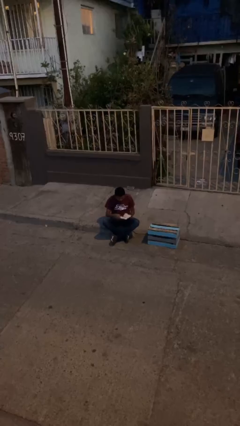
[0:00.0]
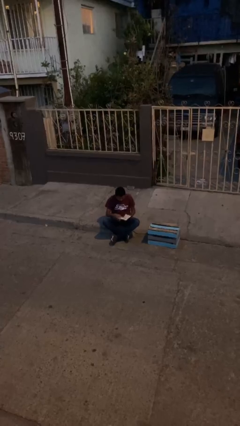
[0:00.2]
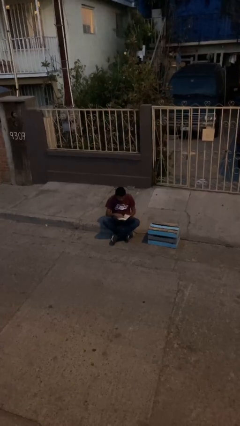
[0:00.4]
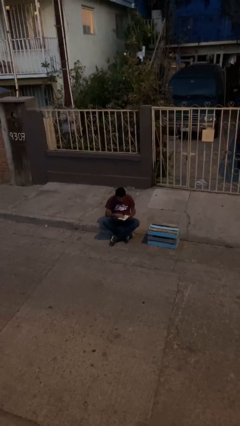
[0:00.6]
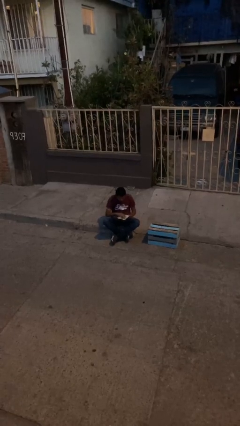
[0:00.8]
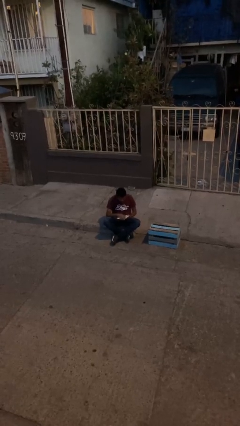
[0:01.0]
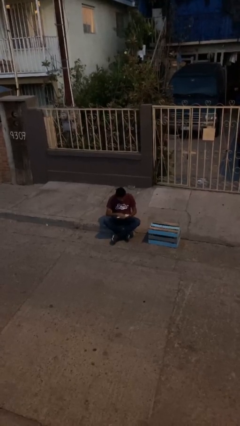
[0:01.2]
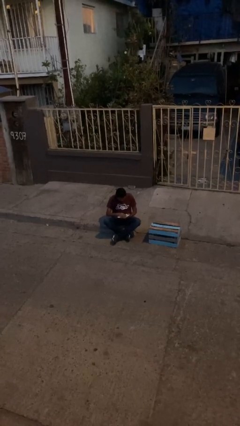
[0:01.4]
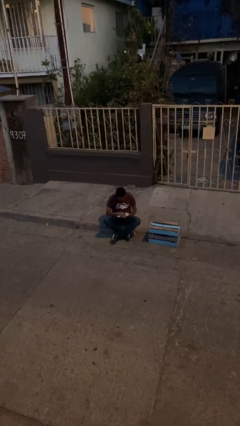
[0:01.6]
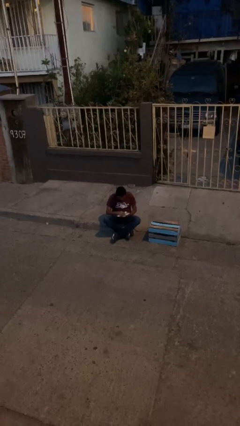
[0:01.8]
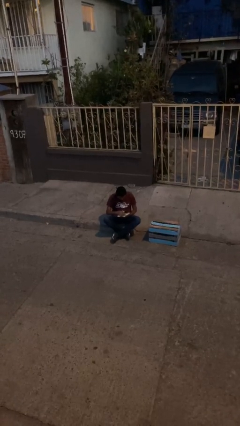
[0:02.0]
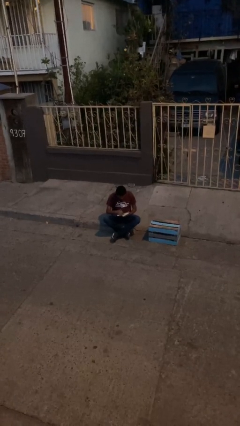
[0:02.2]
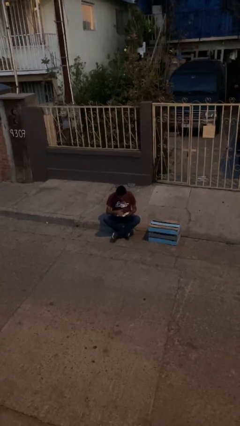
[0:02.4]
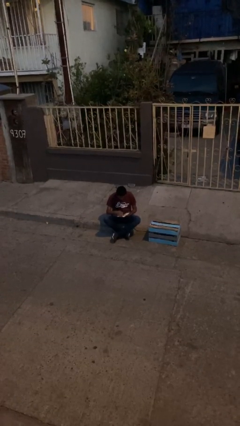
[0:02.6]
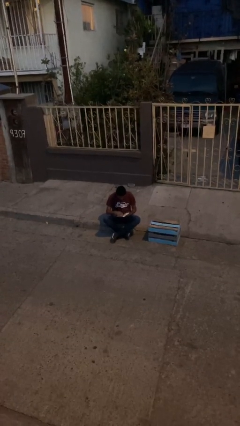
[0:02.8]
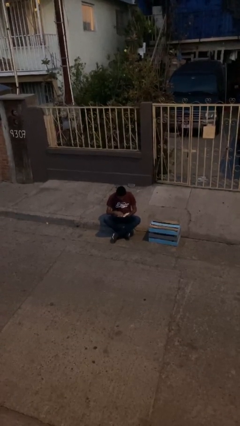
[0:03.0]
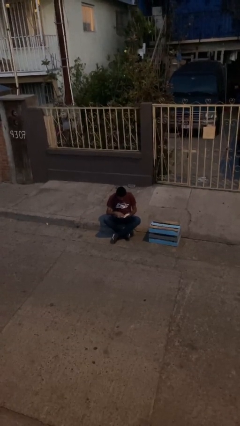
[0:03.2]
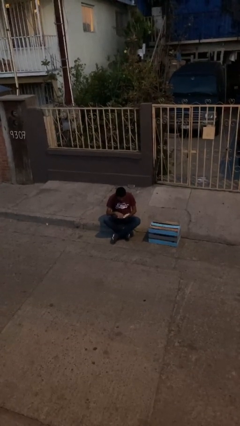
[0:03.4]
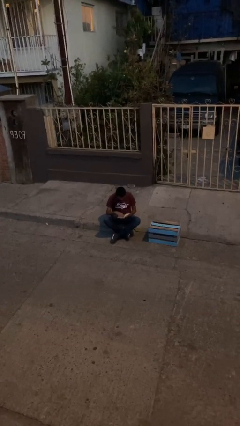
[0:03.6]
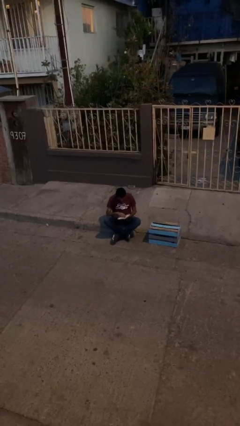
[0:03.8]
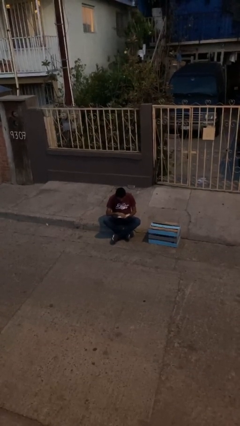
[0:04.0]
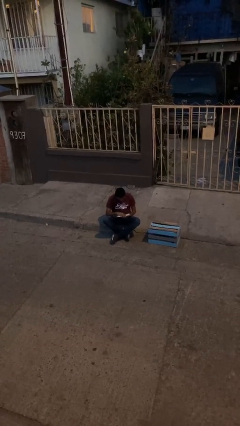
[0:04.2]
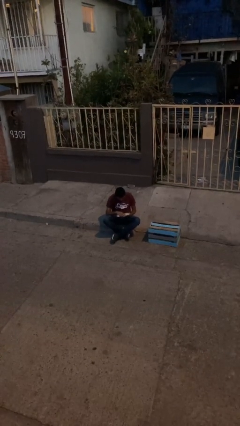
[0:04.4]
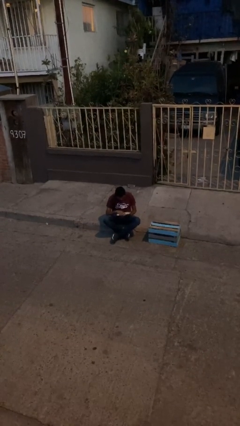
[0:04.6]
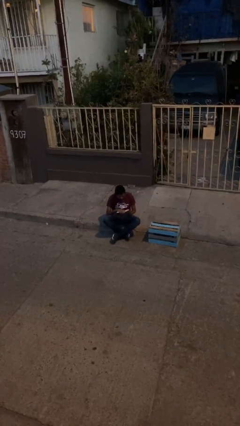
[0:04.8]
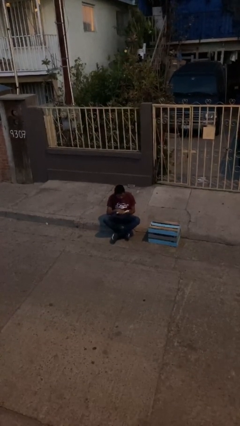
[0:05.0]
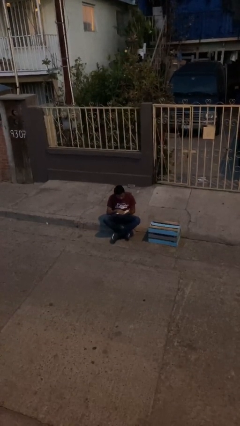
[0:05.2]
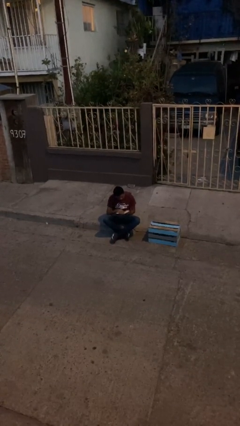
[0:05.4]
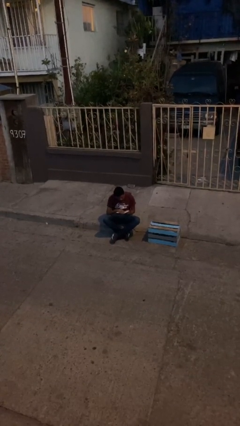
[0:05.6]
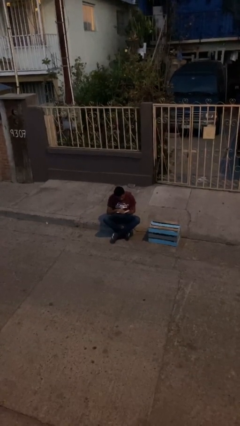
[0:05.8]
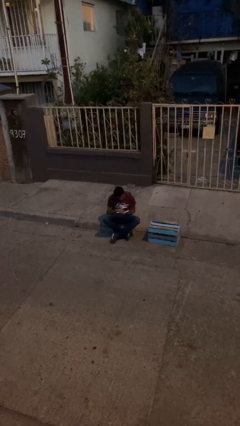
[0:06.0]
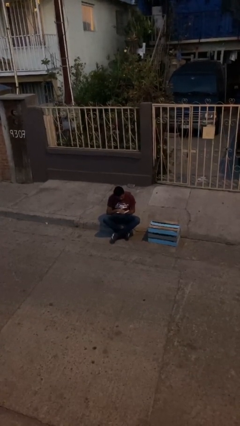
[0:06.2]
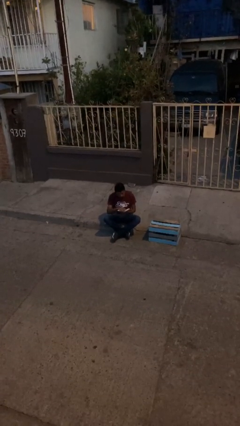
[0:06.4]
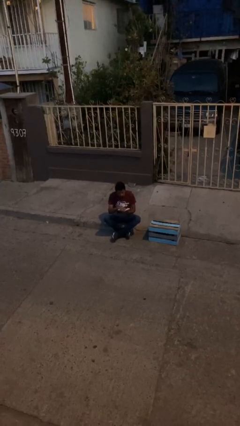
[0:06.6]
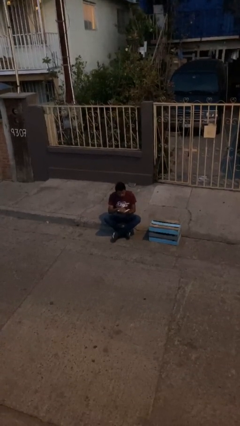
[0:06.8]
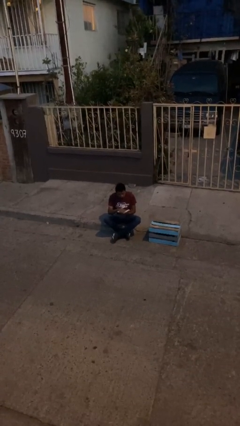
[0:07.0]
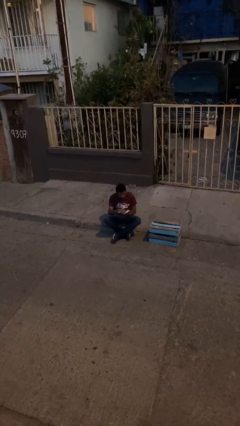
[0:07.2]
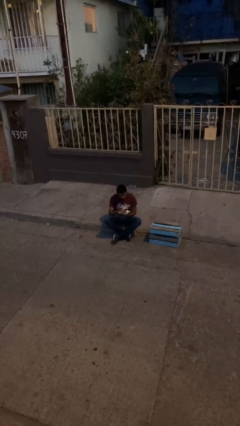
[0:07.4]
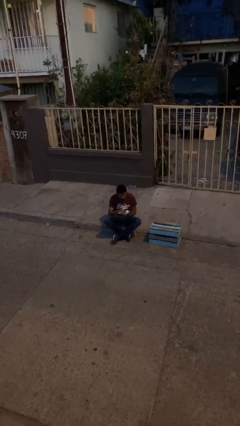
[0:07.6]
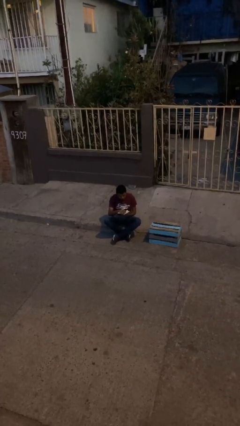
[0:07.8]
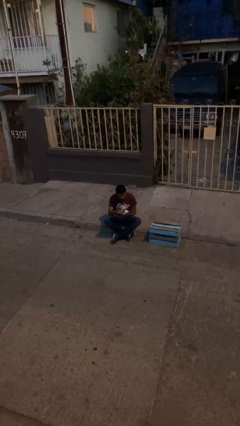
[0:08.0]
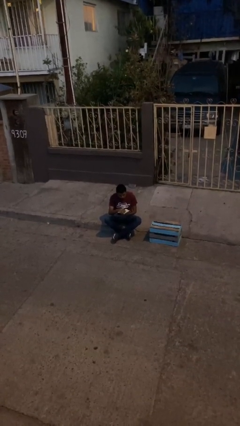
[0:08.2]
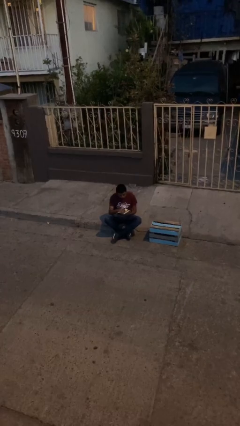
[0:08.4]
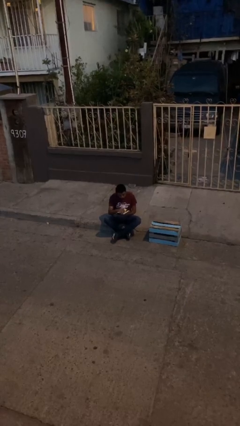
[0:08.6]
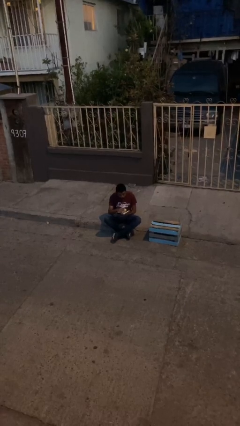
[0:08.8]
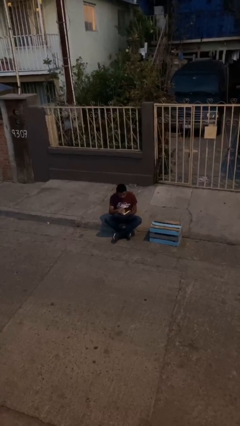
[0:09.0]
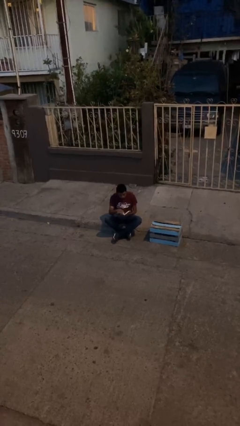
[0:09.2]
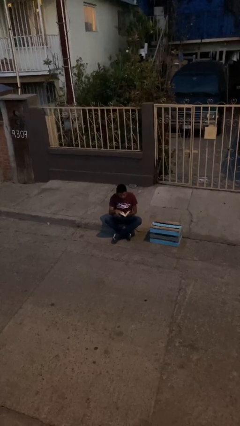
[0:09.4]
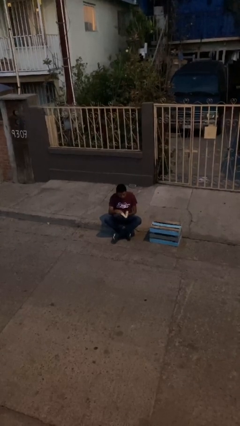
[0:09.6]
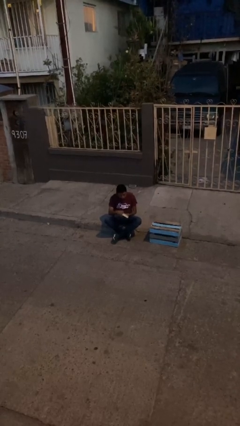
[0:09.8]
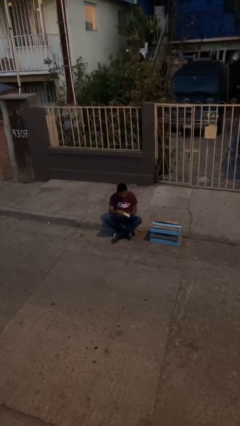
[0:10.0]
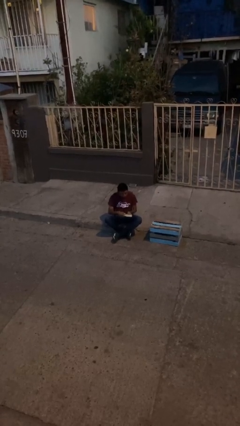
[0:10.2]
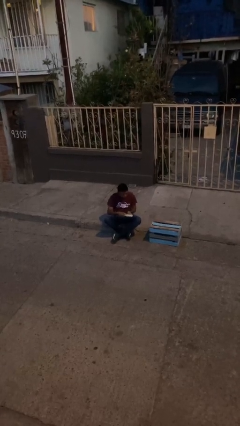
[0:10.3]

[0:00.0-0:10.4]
person reads document

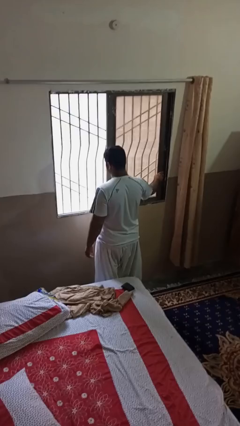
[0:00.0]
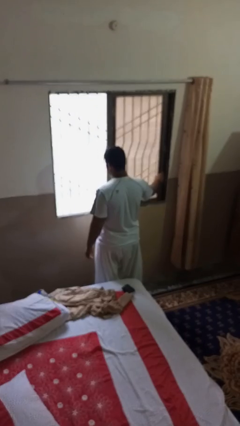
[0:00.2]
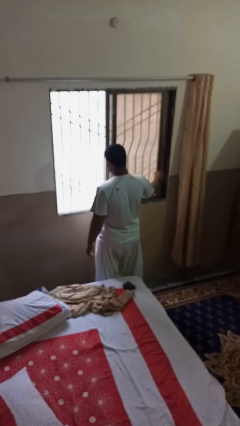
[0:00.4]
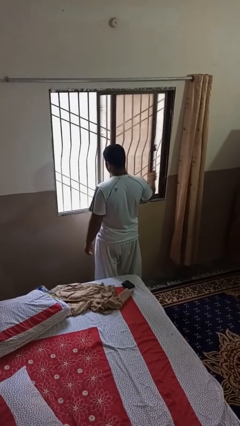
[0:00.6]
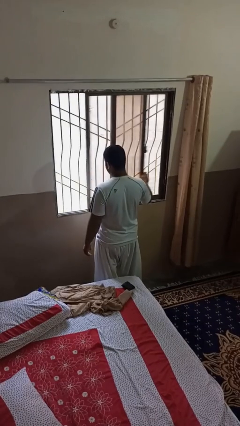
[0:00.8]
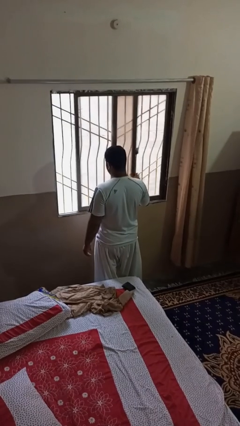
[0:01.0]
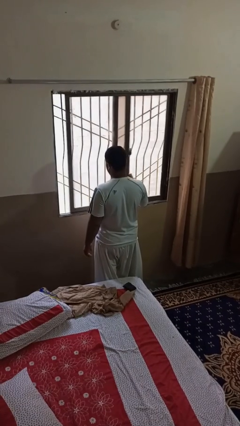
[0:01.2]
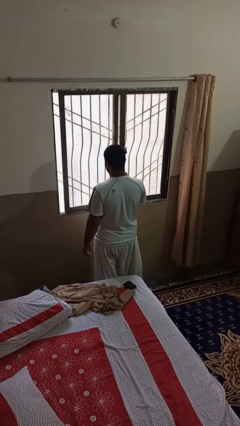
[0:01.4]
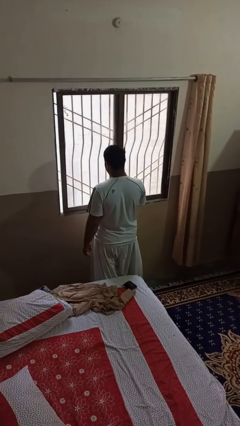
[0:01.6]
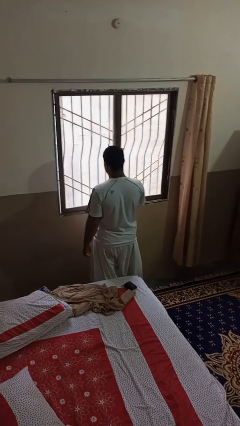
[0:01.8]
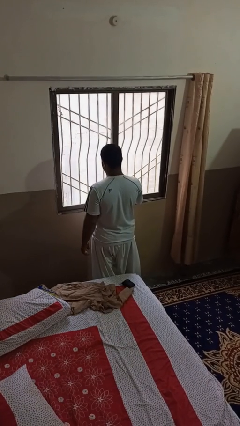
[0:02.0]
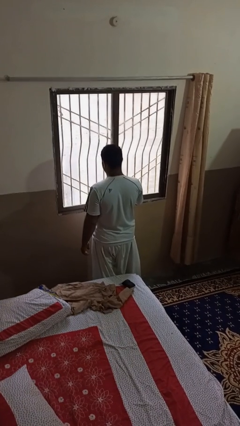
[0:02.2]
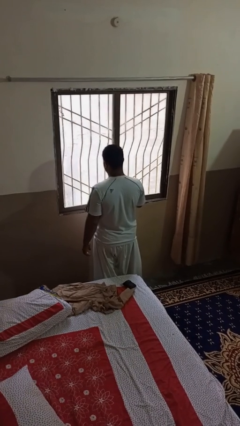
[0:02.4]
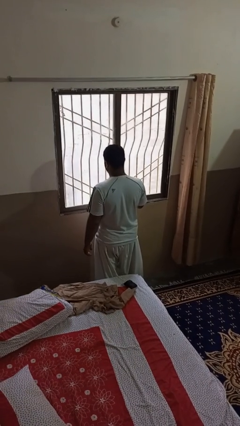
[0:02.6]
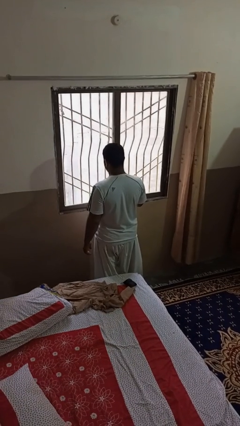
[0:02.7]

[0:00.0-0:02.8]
person closes home window

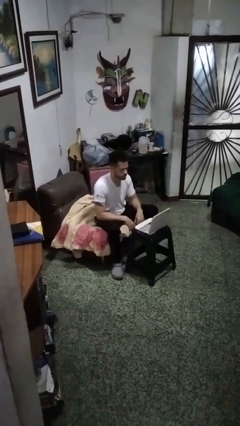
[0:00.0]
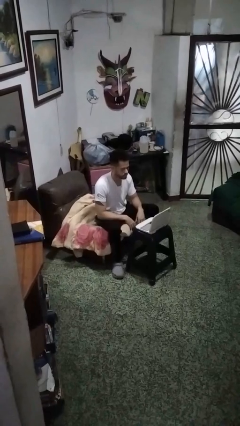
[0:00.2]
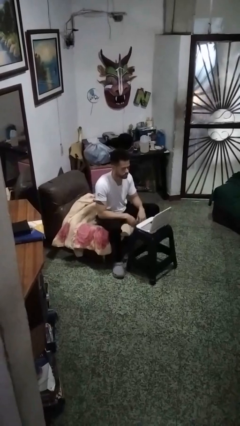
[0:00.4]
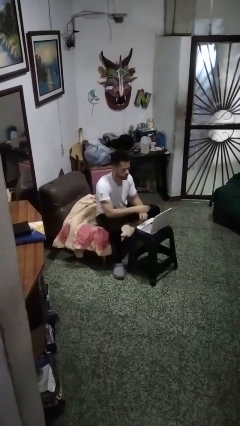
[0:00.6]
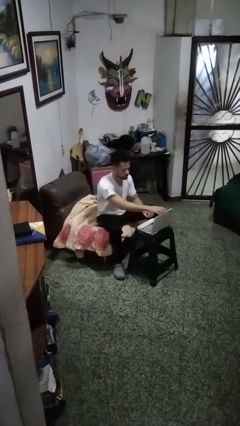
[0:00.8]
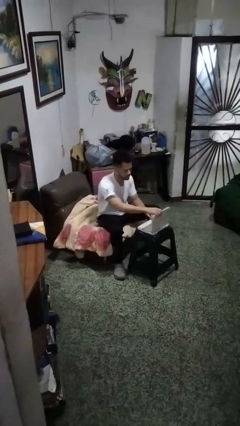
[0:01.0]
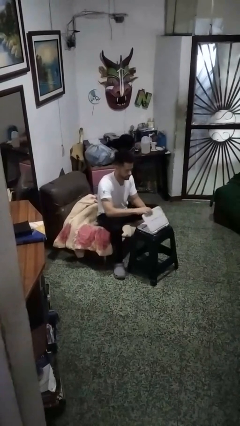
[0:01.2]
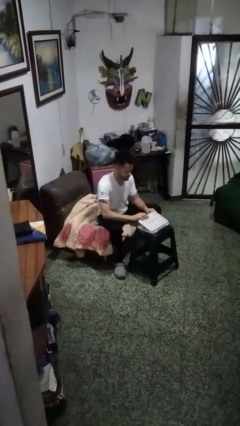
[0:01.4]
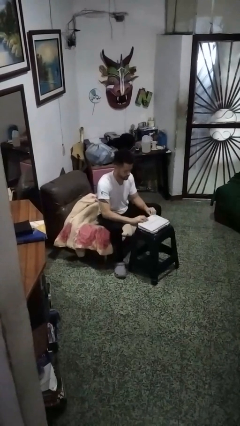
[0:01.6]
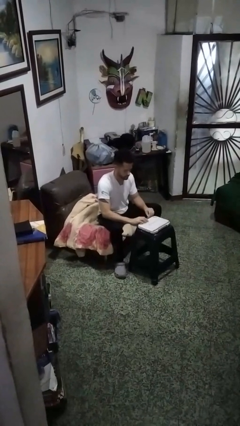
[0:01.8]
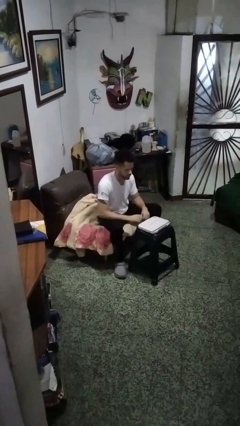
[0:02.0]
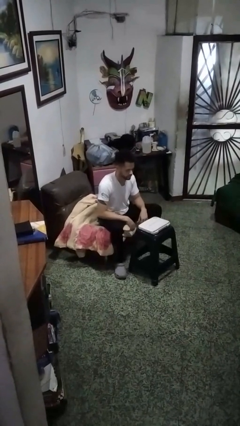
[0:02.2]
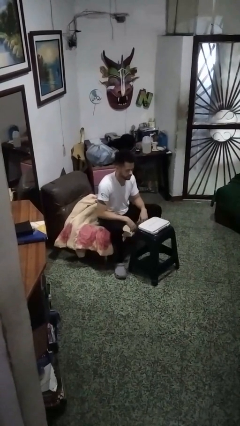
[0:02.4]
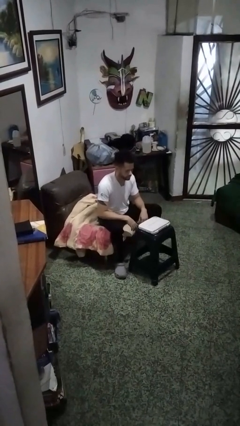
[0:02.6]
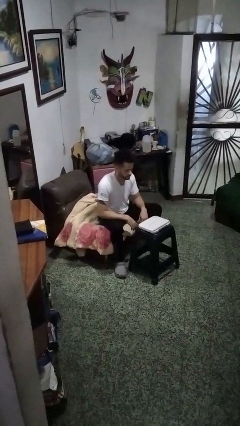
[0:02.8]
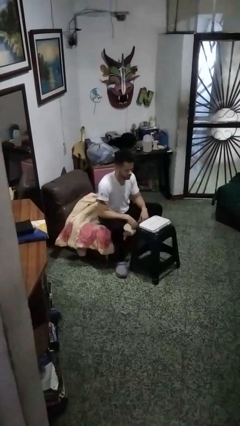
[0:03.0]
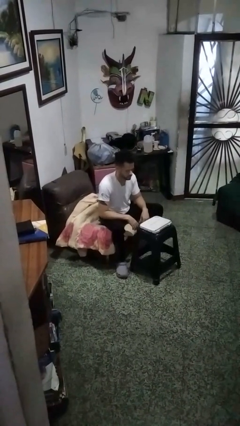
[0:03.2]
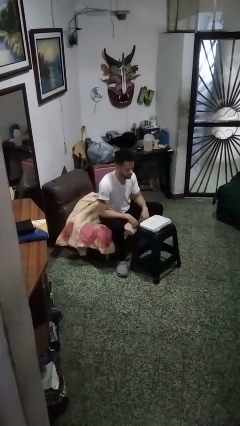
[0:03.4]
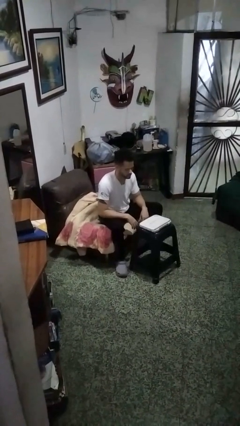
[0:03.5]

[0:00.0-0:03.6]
person closes laptop

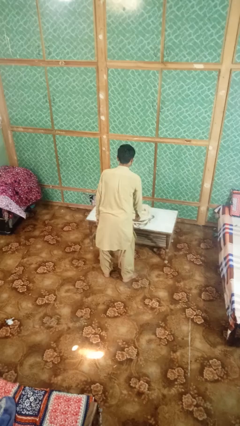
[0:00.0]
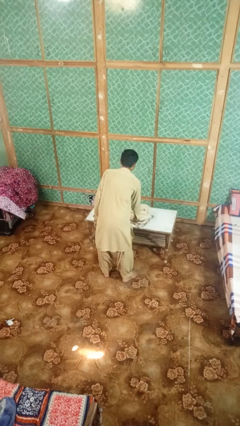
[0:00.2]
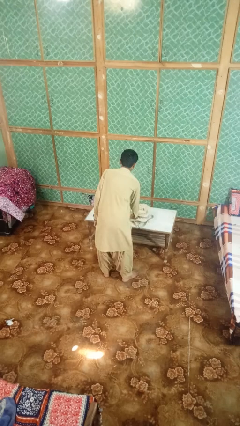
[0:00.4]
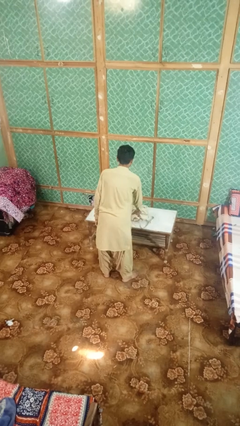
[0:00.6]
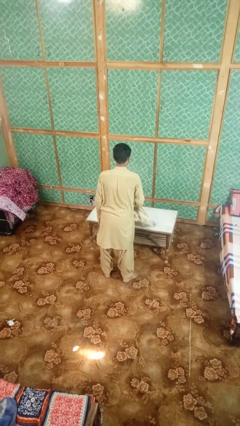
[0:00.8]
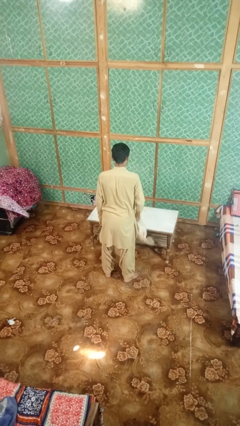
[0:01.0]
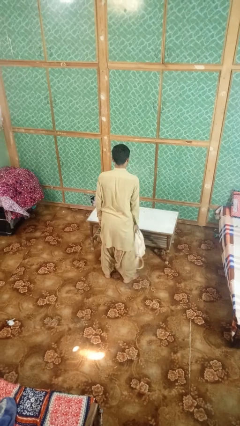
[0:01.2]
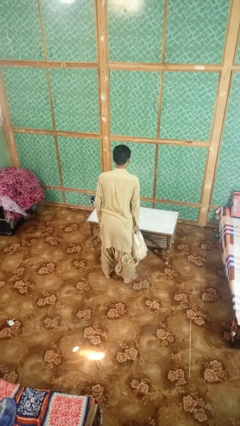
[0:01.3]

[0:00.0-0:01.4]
person picks up object from table
